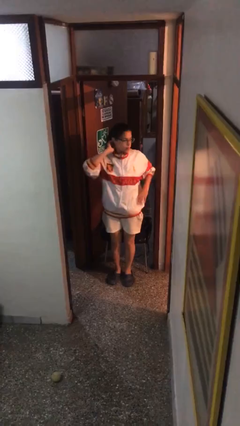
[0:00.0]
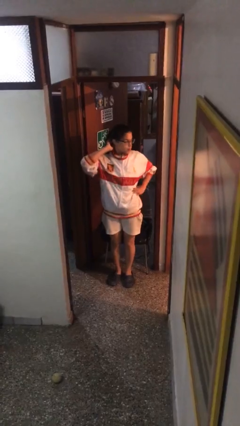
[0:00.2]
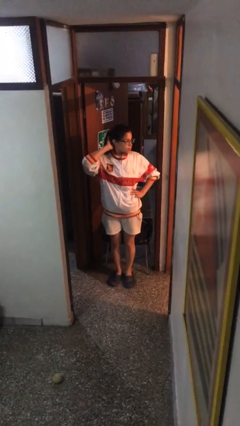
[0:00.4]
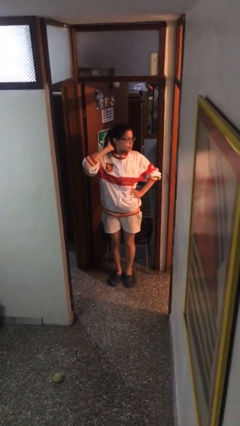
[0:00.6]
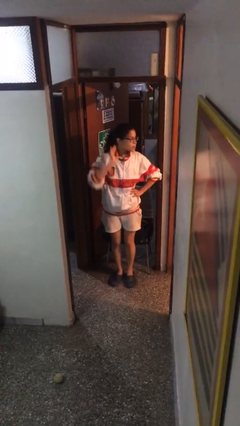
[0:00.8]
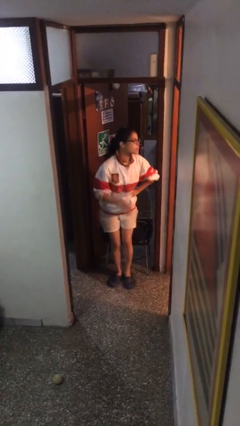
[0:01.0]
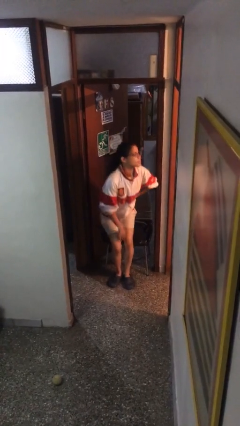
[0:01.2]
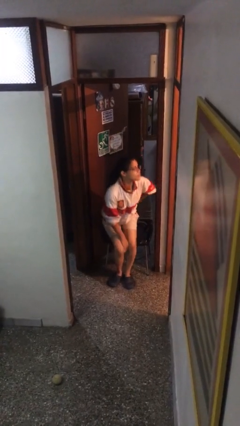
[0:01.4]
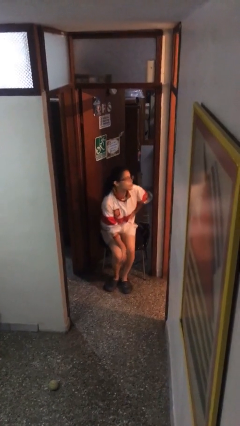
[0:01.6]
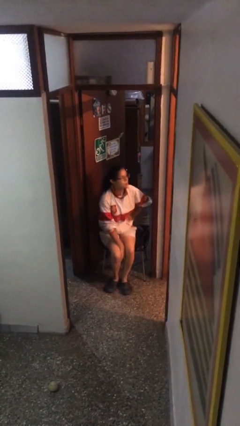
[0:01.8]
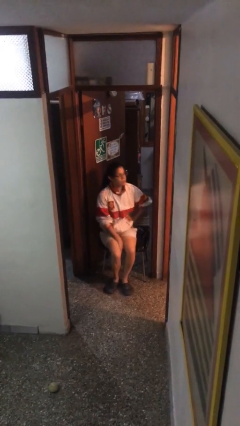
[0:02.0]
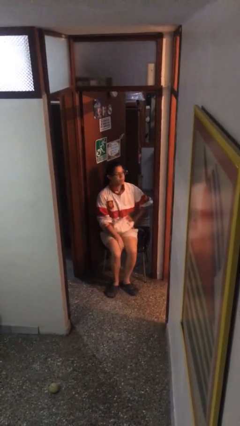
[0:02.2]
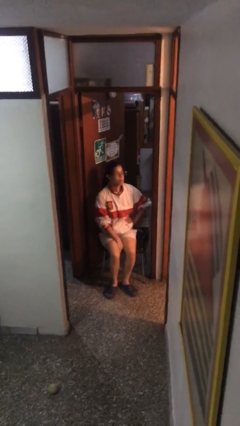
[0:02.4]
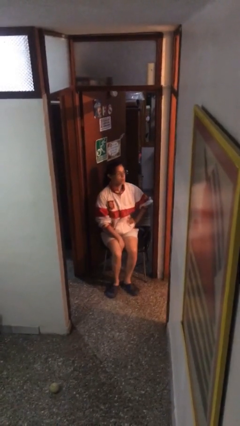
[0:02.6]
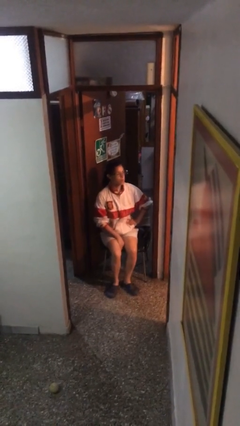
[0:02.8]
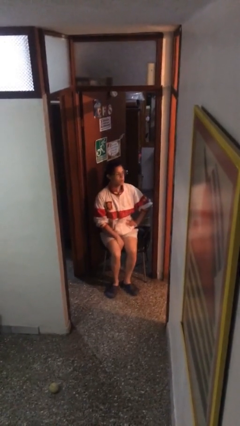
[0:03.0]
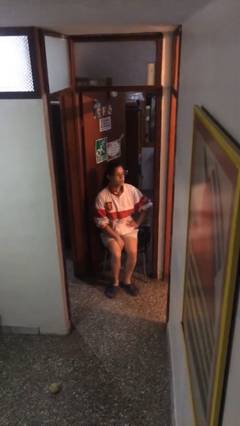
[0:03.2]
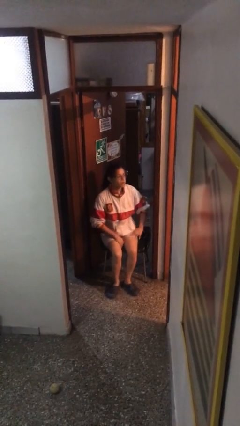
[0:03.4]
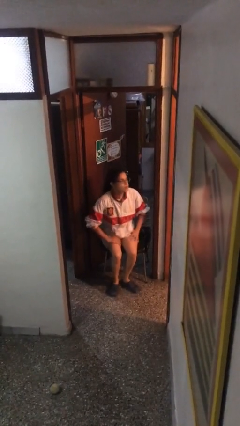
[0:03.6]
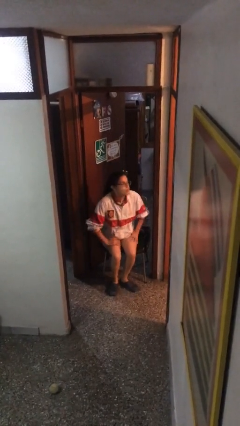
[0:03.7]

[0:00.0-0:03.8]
person sits down

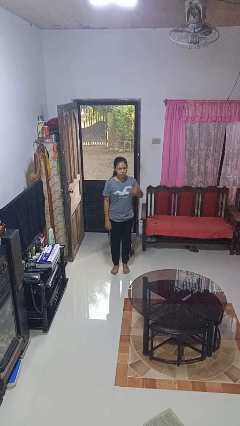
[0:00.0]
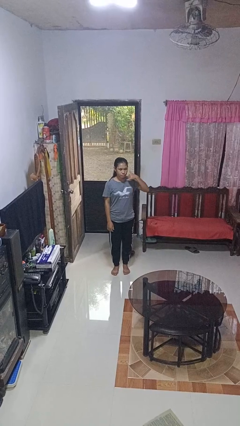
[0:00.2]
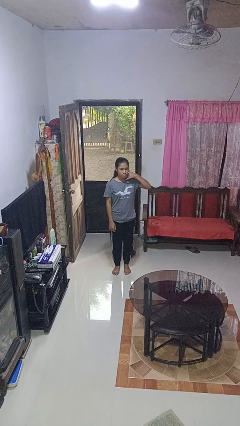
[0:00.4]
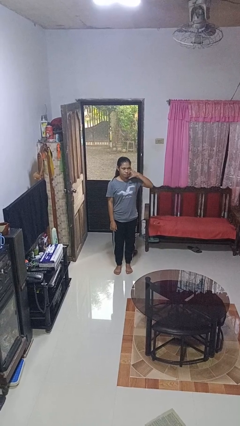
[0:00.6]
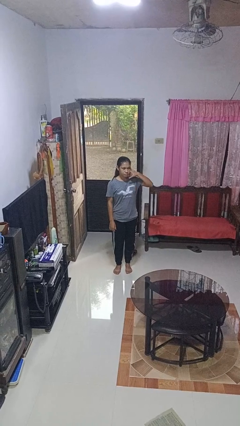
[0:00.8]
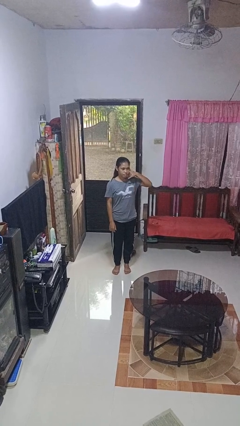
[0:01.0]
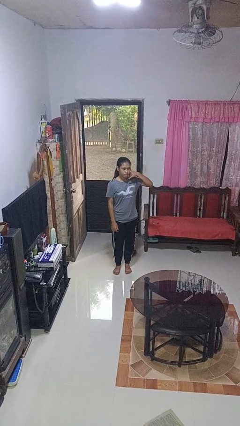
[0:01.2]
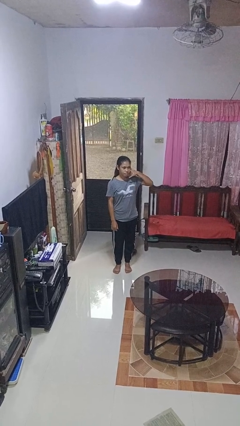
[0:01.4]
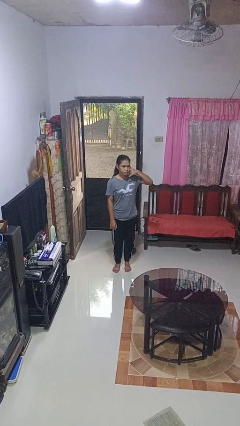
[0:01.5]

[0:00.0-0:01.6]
person gestures call me

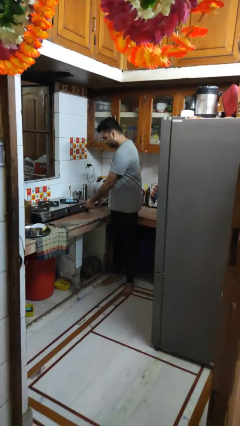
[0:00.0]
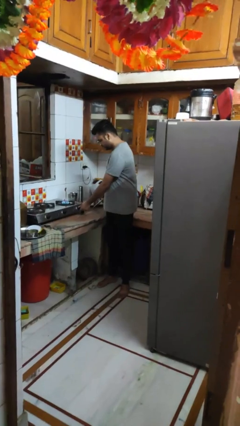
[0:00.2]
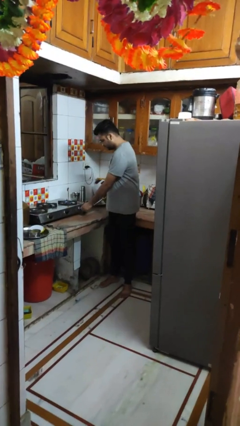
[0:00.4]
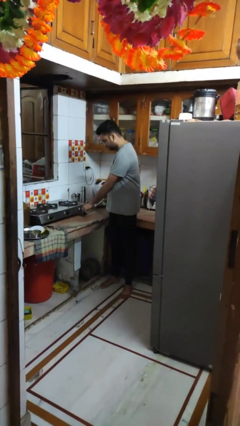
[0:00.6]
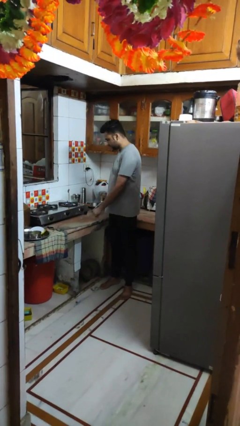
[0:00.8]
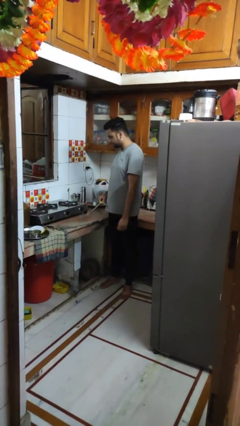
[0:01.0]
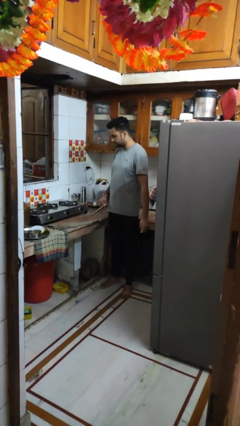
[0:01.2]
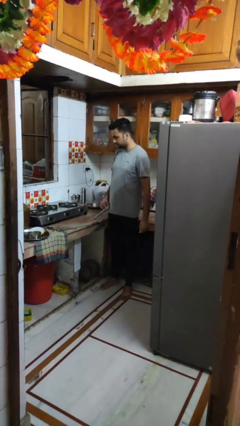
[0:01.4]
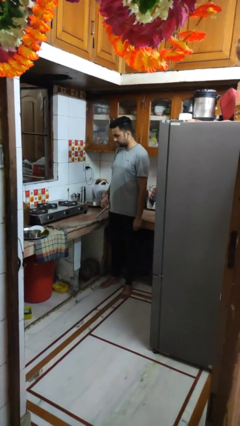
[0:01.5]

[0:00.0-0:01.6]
person turns off stovetop

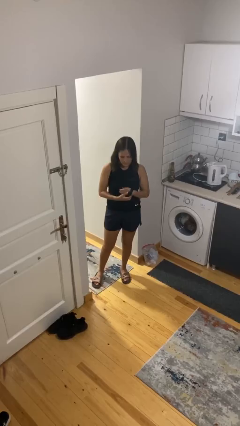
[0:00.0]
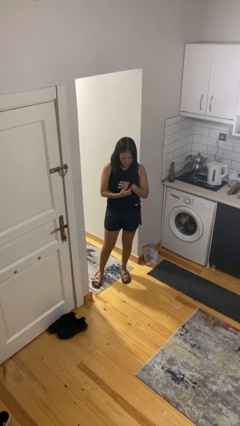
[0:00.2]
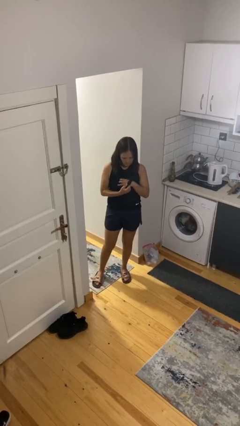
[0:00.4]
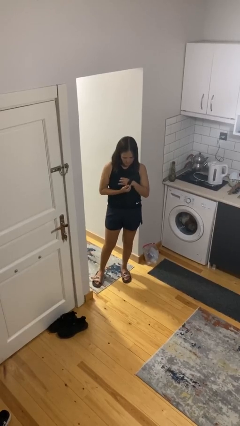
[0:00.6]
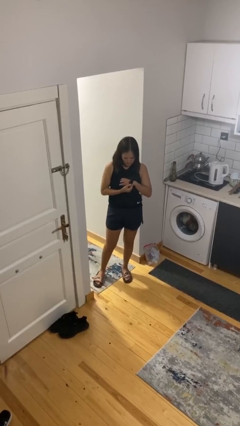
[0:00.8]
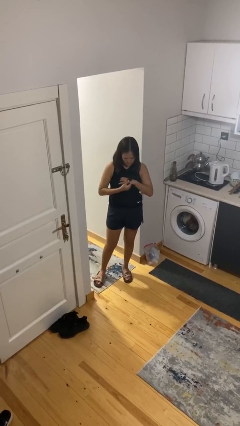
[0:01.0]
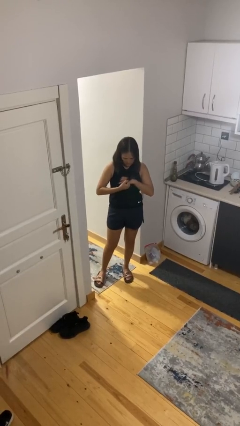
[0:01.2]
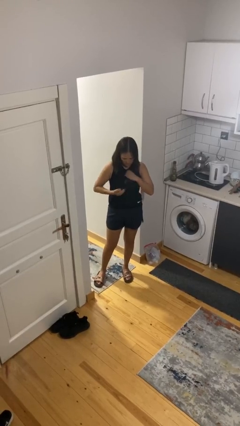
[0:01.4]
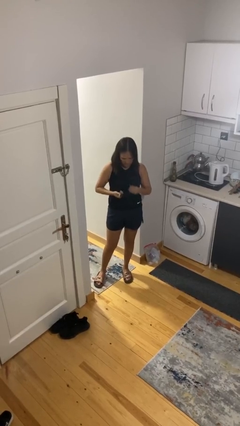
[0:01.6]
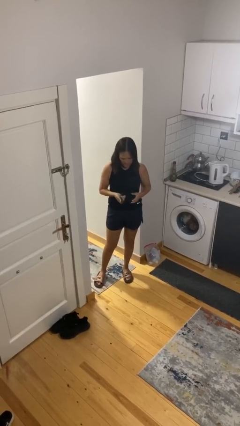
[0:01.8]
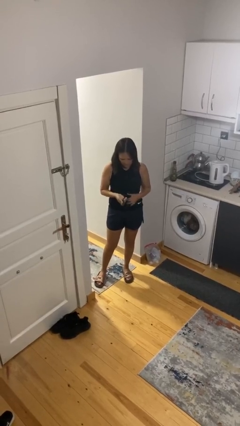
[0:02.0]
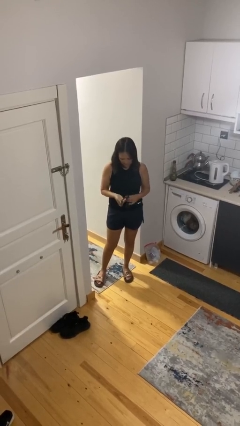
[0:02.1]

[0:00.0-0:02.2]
person takes off wristwatch

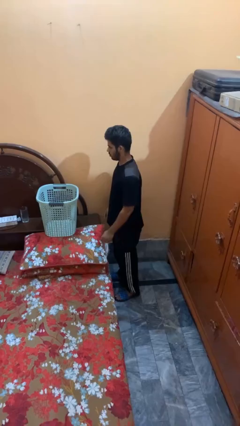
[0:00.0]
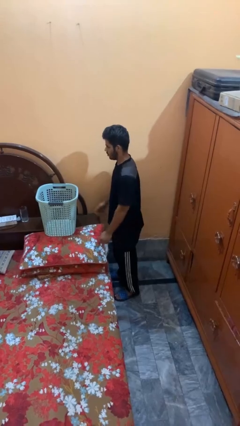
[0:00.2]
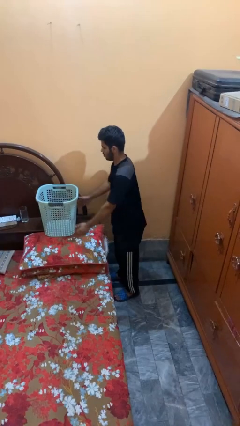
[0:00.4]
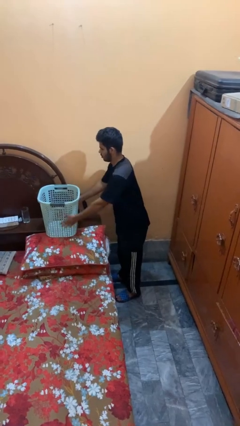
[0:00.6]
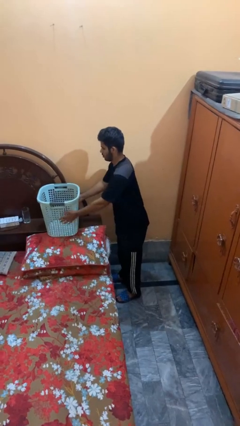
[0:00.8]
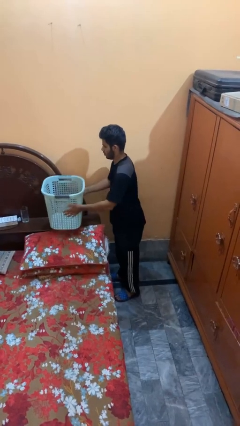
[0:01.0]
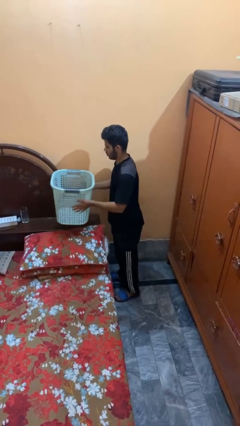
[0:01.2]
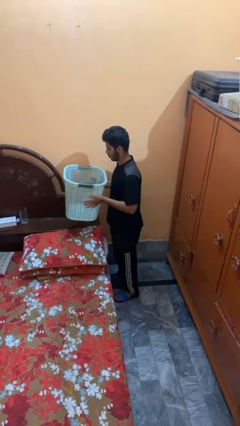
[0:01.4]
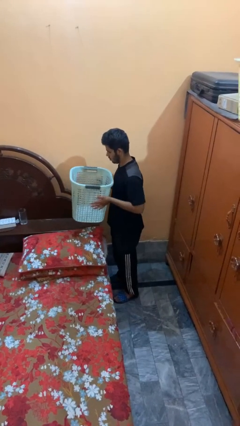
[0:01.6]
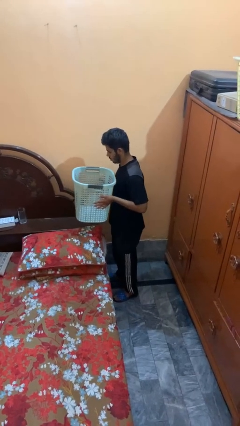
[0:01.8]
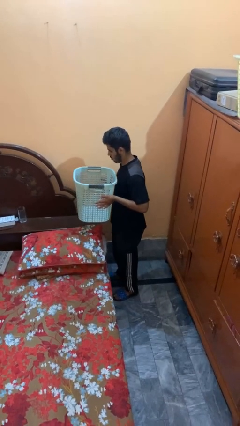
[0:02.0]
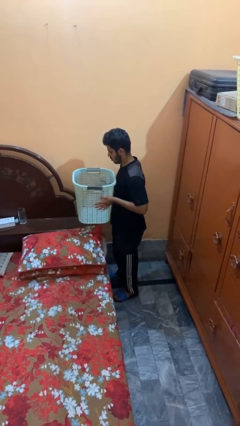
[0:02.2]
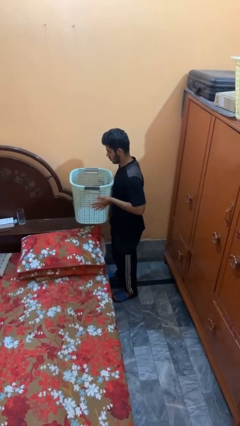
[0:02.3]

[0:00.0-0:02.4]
person picks up object from bed

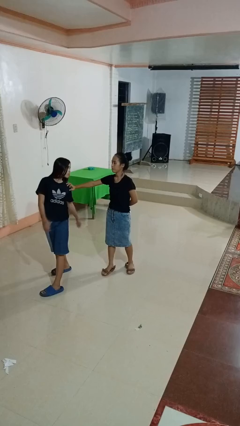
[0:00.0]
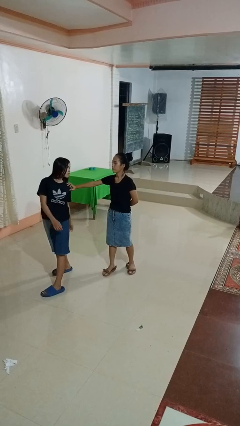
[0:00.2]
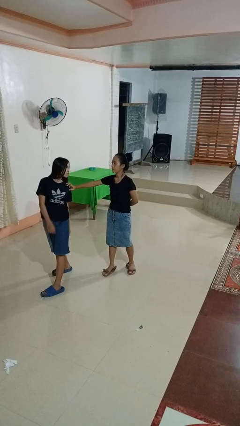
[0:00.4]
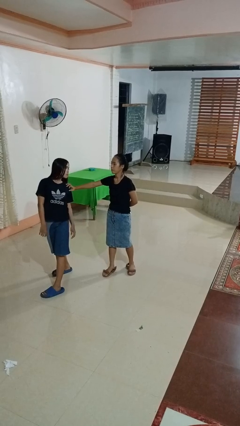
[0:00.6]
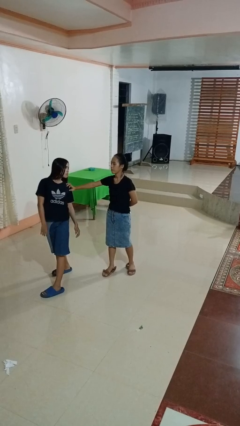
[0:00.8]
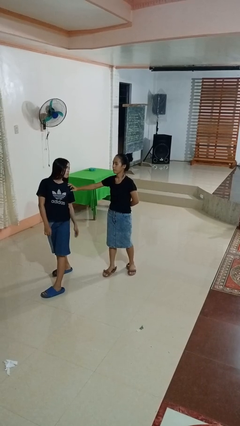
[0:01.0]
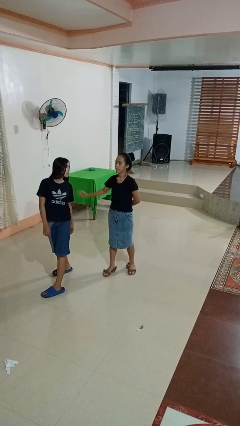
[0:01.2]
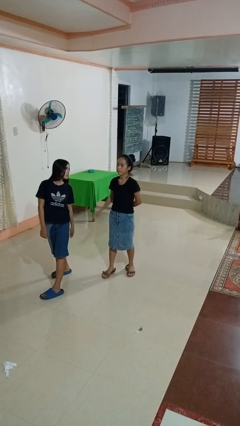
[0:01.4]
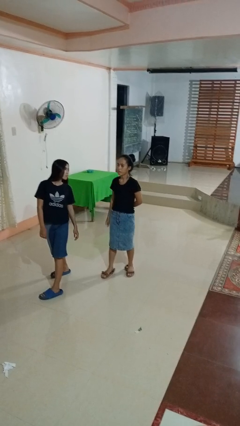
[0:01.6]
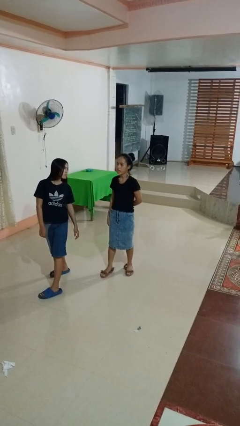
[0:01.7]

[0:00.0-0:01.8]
person spins person around

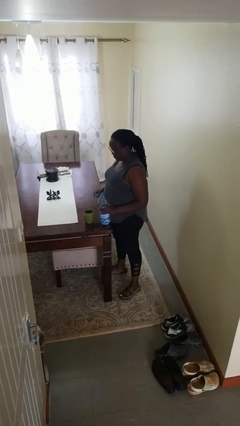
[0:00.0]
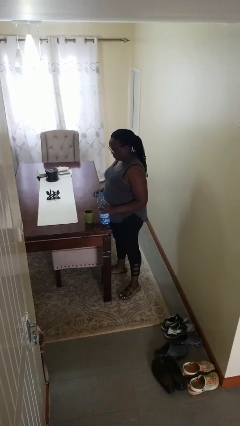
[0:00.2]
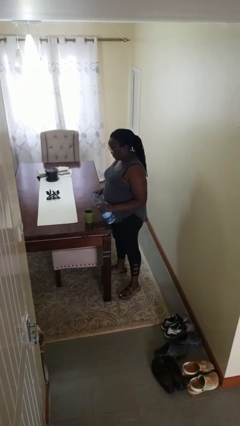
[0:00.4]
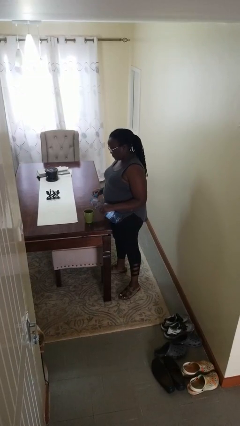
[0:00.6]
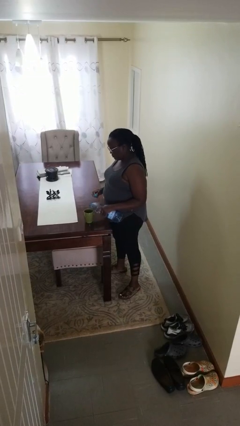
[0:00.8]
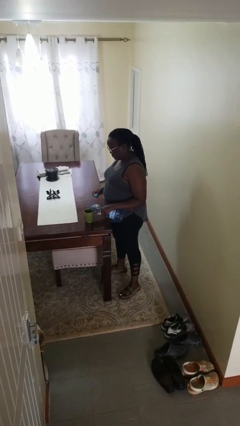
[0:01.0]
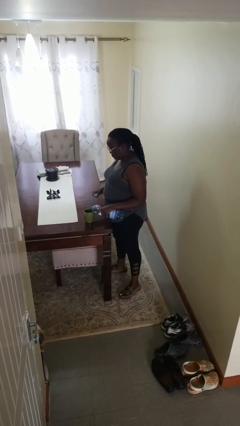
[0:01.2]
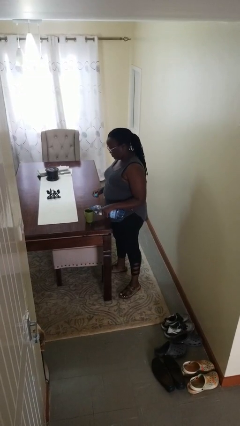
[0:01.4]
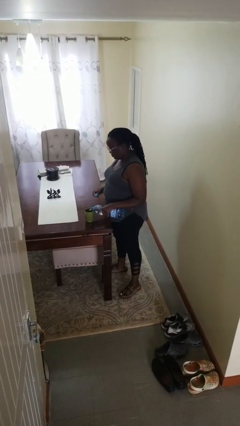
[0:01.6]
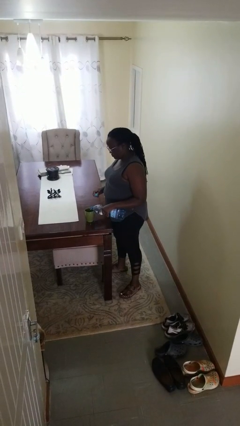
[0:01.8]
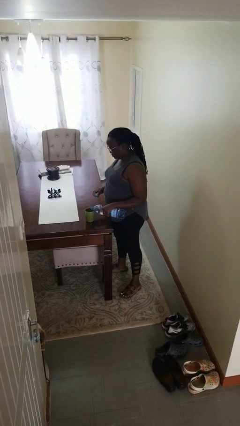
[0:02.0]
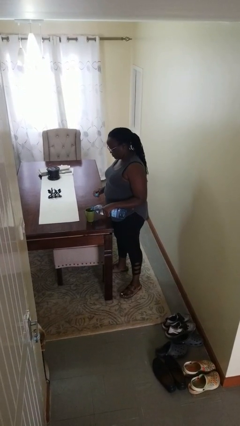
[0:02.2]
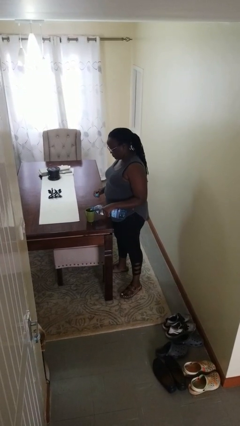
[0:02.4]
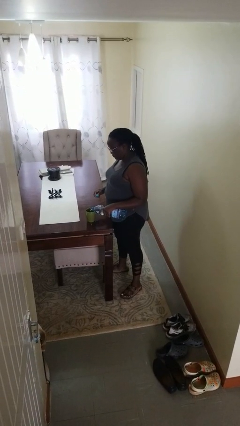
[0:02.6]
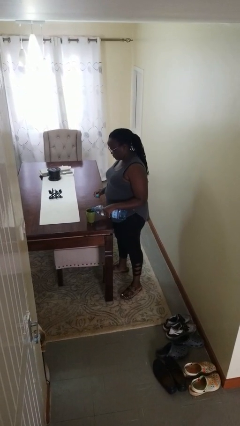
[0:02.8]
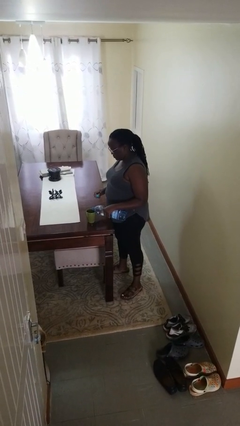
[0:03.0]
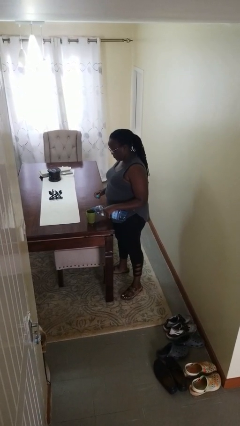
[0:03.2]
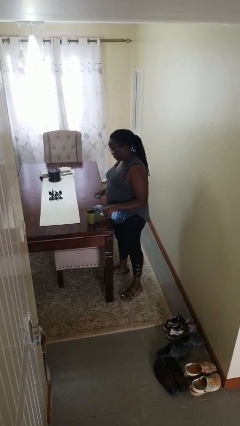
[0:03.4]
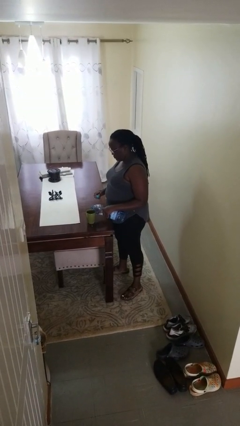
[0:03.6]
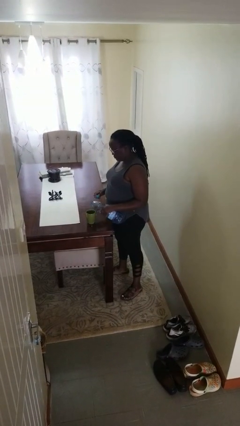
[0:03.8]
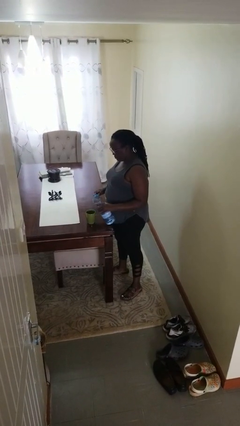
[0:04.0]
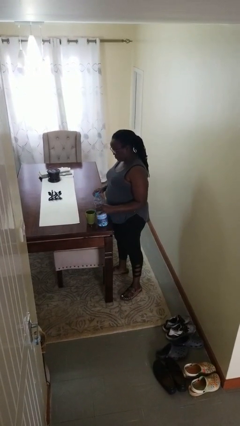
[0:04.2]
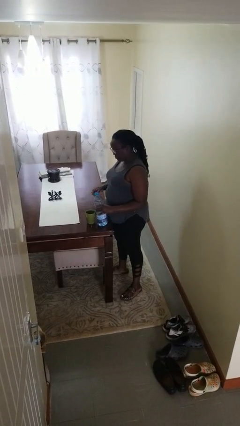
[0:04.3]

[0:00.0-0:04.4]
person pours liquid into cup
